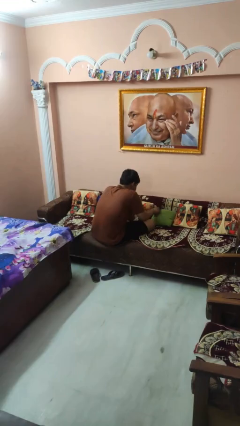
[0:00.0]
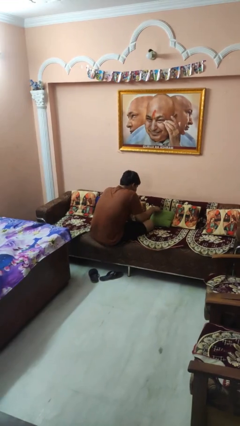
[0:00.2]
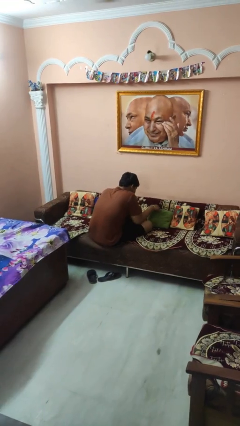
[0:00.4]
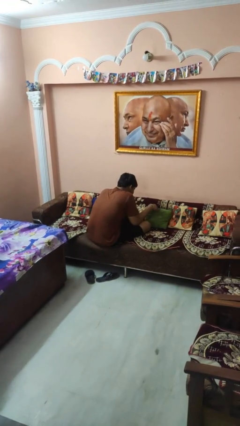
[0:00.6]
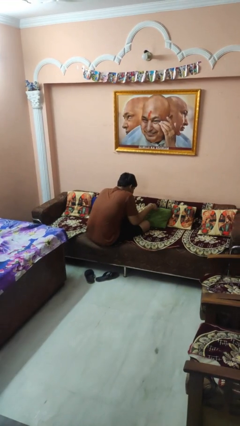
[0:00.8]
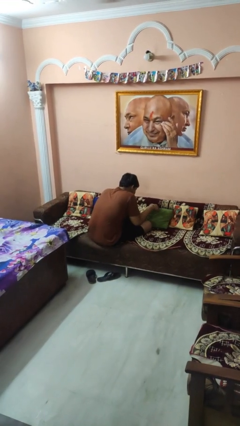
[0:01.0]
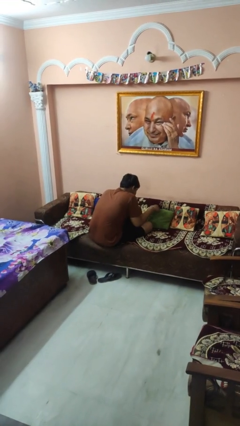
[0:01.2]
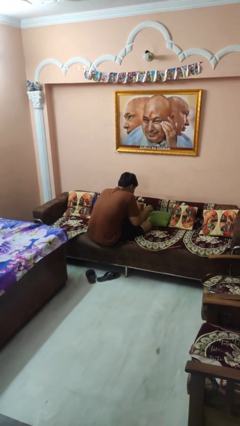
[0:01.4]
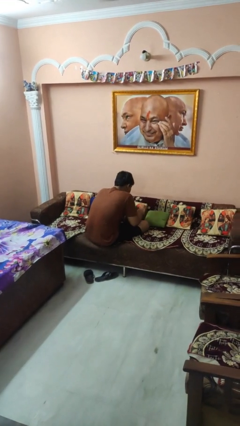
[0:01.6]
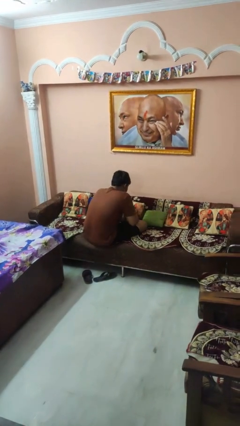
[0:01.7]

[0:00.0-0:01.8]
person searches in couch

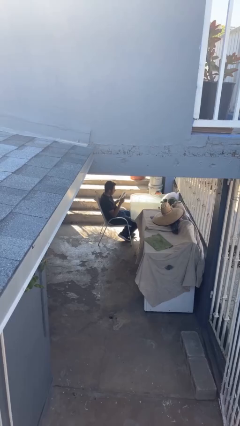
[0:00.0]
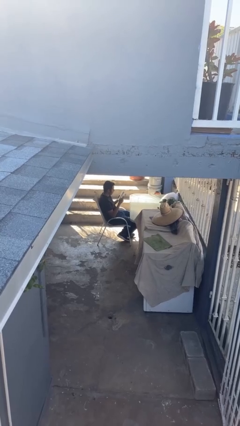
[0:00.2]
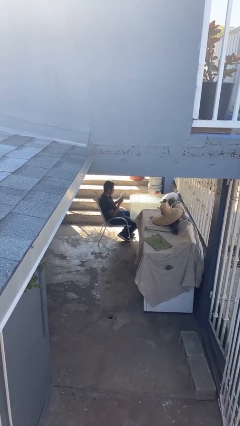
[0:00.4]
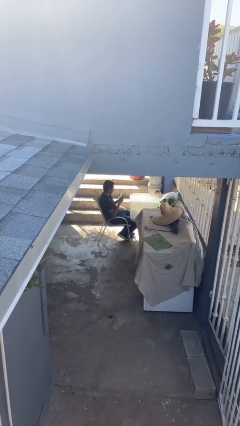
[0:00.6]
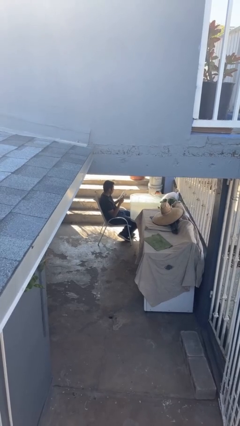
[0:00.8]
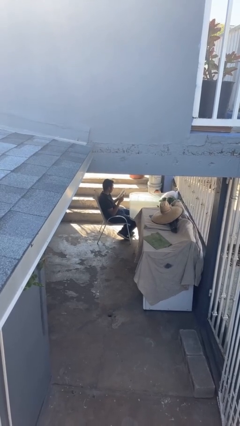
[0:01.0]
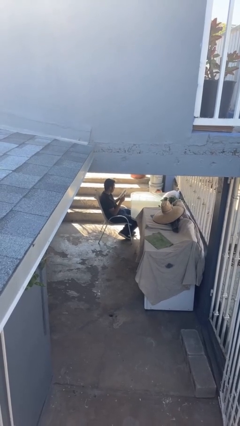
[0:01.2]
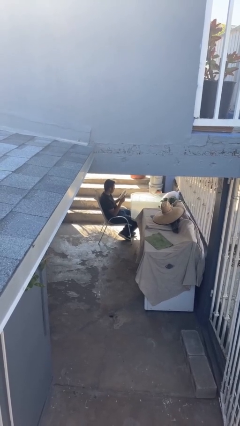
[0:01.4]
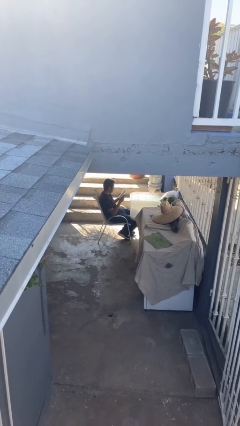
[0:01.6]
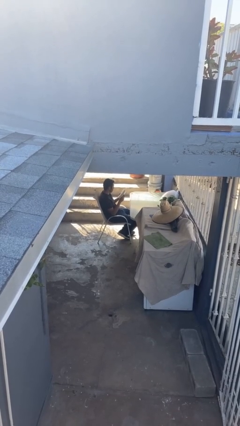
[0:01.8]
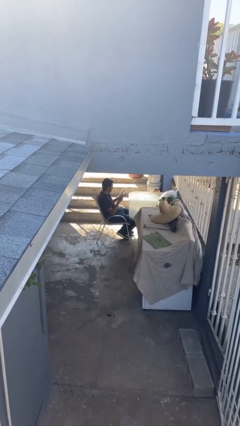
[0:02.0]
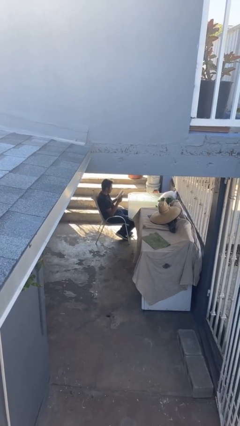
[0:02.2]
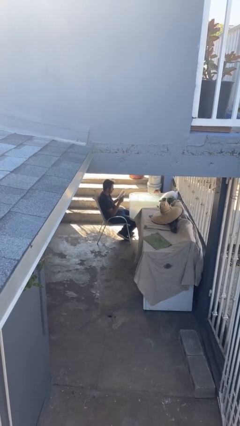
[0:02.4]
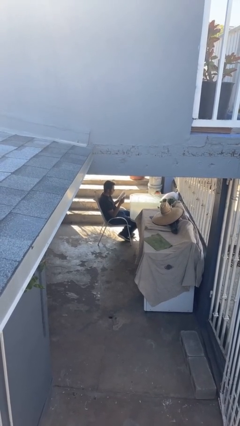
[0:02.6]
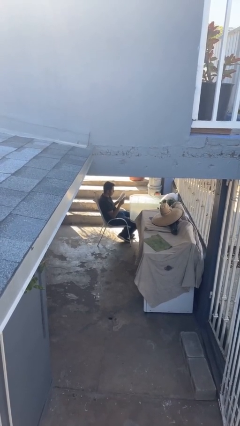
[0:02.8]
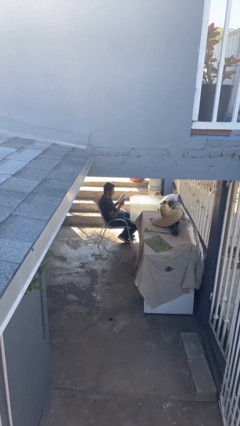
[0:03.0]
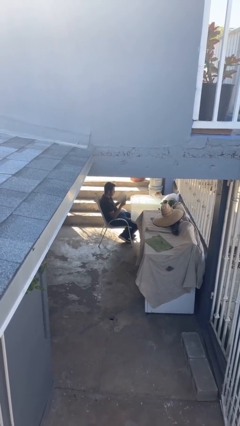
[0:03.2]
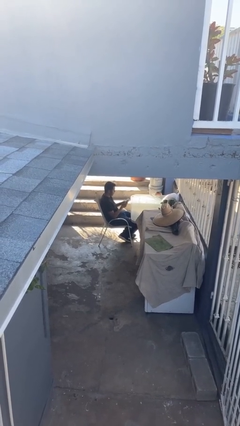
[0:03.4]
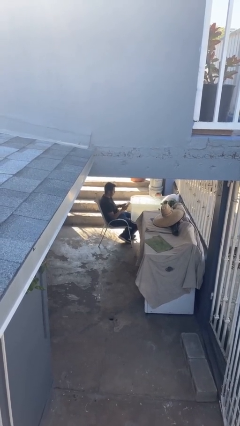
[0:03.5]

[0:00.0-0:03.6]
person reads document

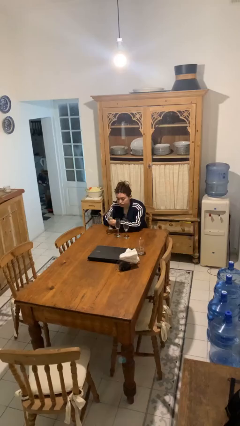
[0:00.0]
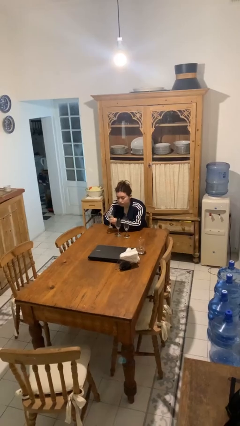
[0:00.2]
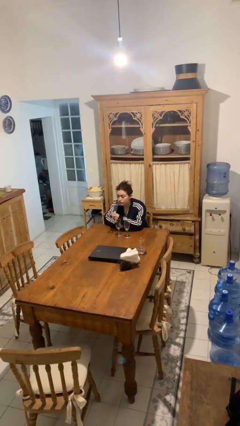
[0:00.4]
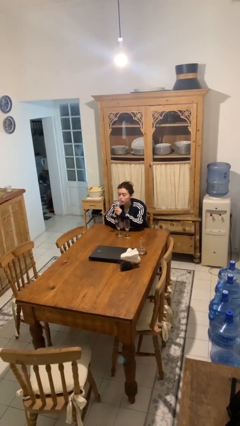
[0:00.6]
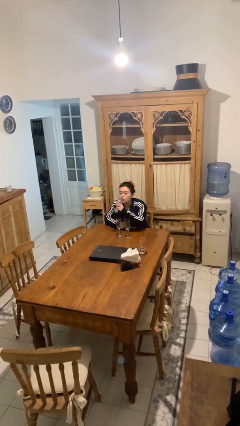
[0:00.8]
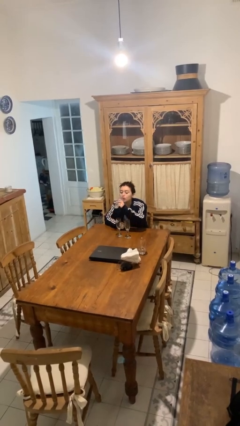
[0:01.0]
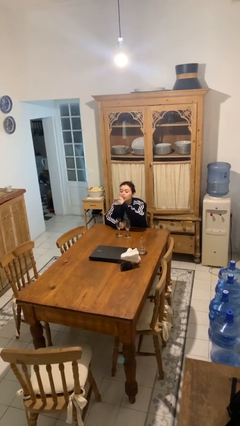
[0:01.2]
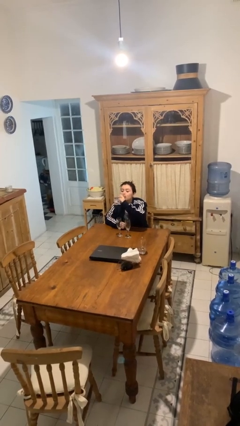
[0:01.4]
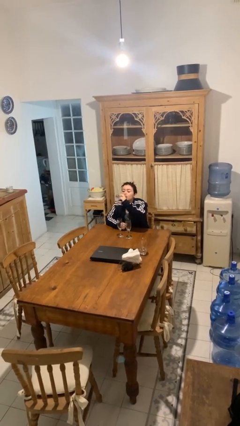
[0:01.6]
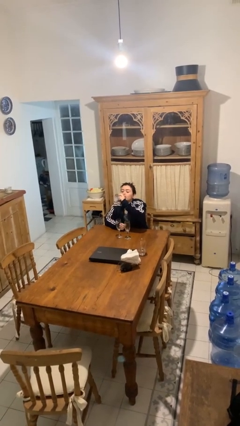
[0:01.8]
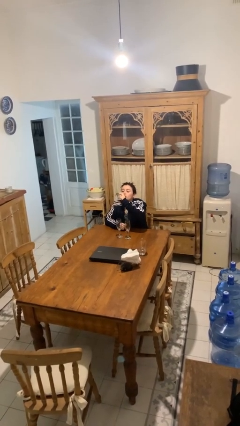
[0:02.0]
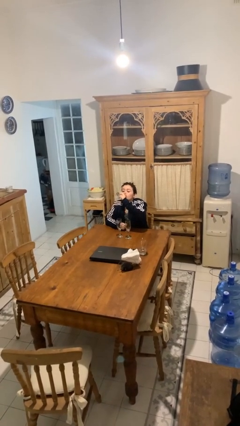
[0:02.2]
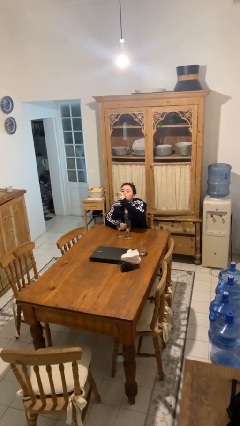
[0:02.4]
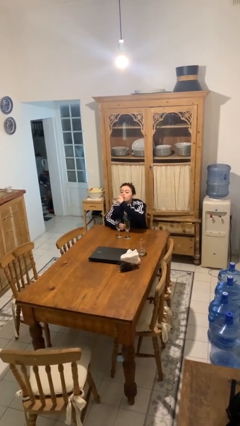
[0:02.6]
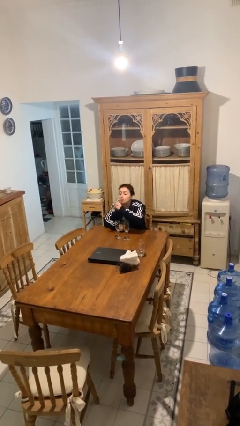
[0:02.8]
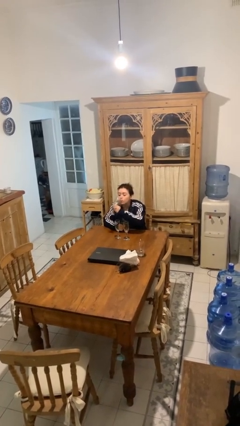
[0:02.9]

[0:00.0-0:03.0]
person drinks from shotglass

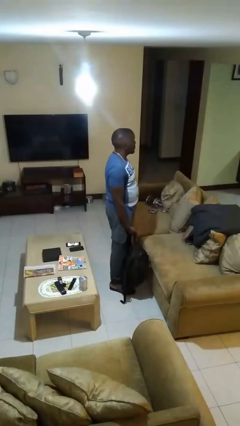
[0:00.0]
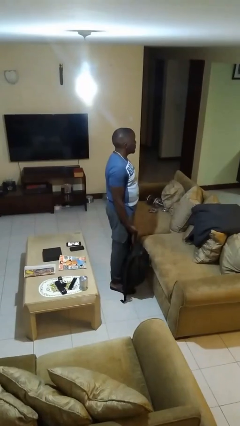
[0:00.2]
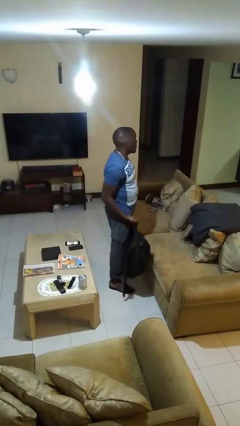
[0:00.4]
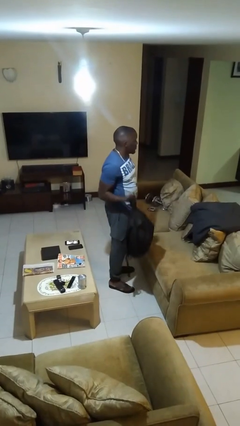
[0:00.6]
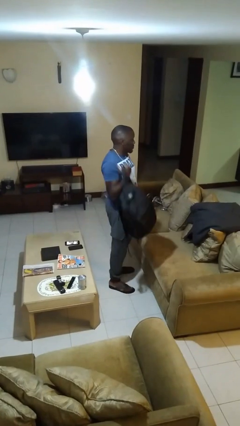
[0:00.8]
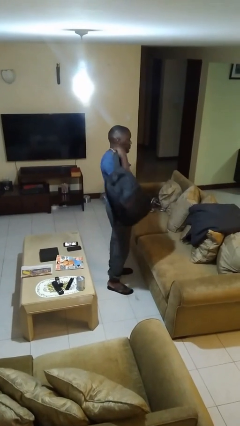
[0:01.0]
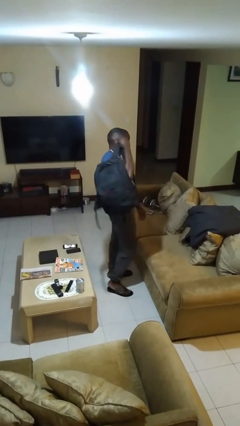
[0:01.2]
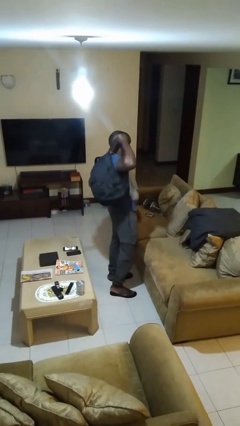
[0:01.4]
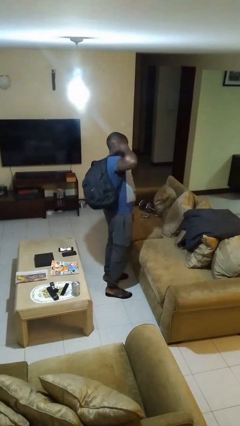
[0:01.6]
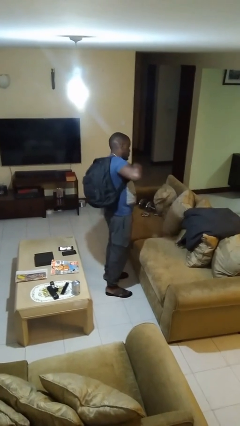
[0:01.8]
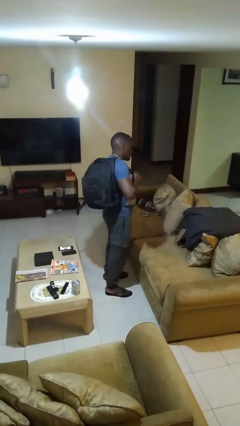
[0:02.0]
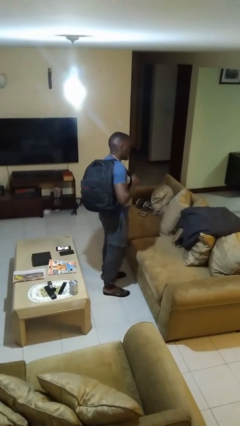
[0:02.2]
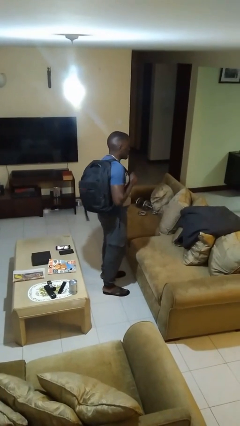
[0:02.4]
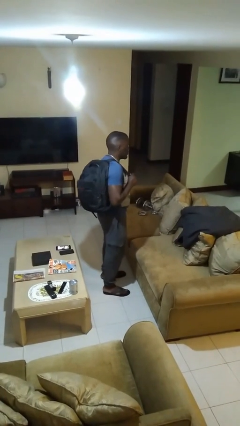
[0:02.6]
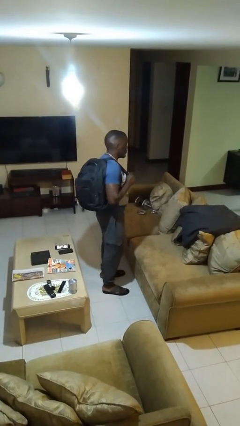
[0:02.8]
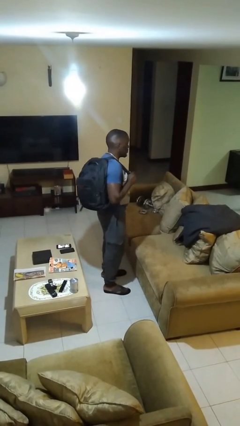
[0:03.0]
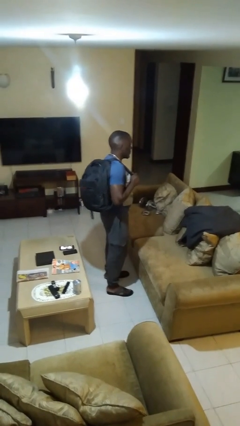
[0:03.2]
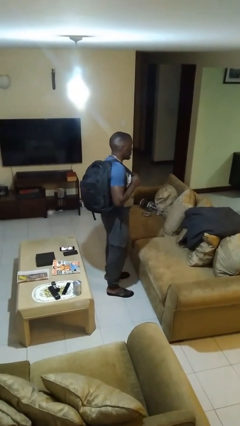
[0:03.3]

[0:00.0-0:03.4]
person puts on backpack

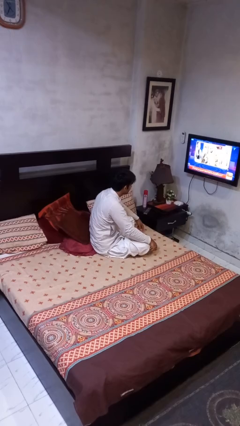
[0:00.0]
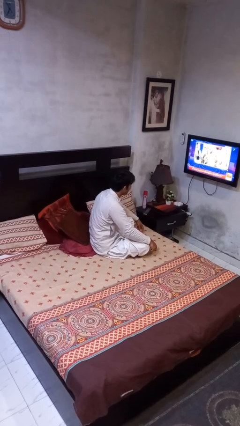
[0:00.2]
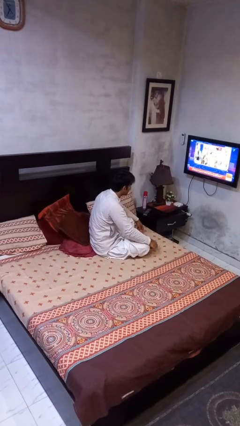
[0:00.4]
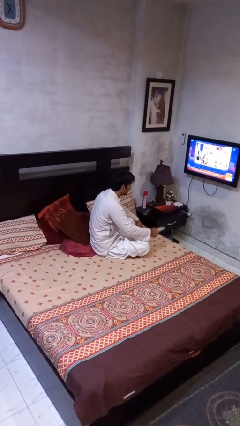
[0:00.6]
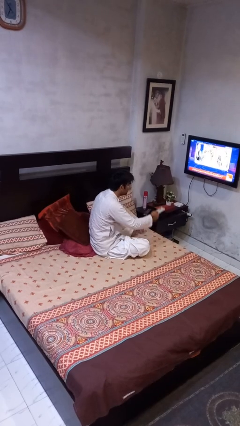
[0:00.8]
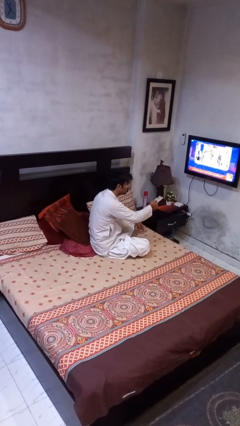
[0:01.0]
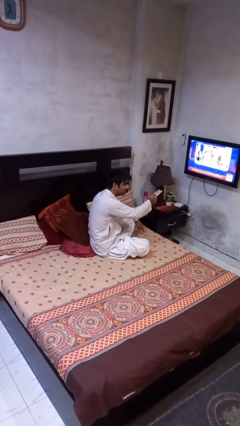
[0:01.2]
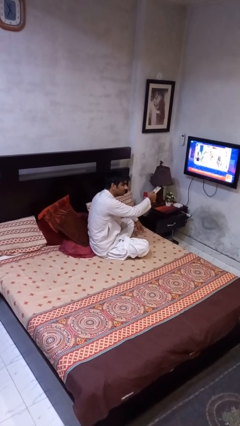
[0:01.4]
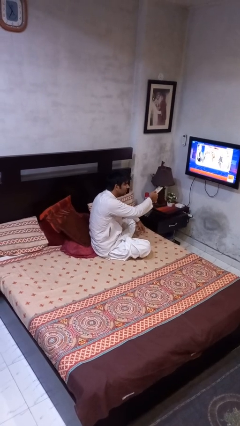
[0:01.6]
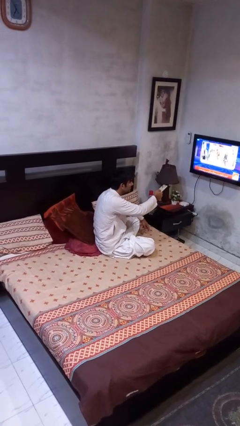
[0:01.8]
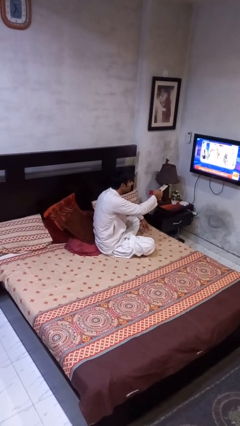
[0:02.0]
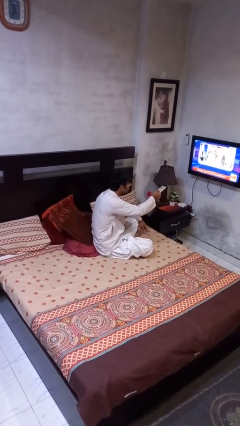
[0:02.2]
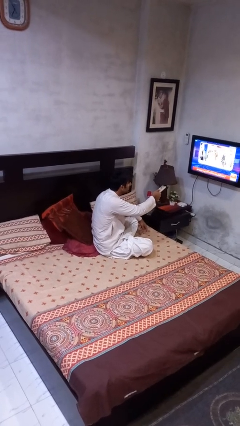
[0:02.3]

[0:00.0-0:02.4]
person uses television remote

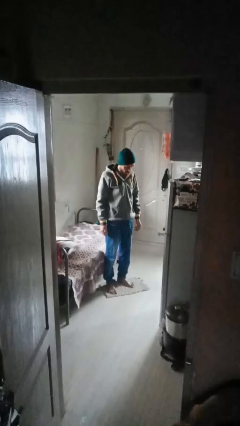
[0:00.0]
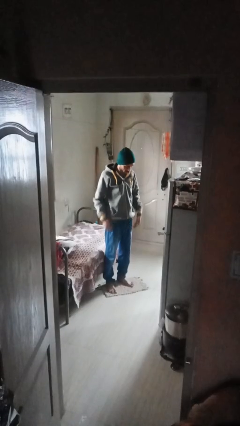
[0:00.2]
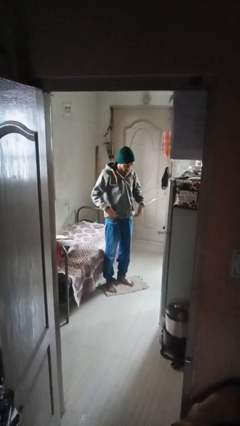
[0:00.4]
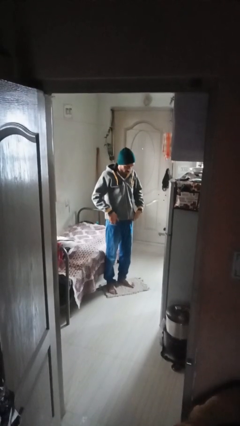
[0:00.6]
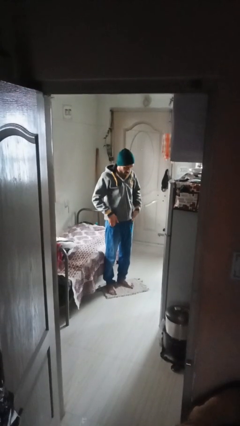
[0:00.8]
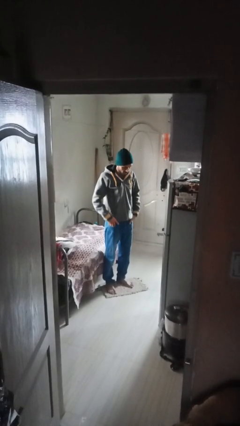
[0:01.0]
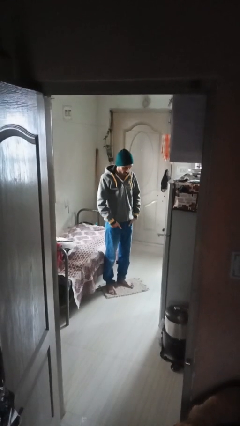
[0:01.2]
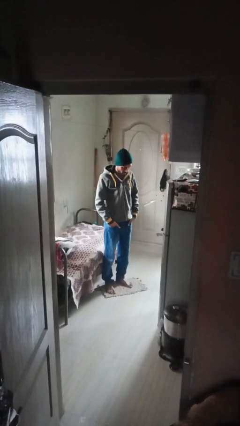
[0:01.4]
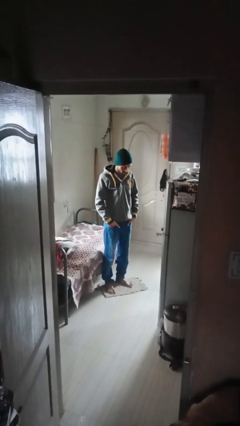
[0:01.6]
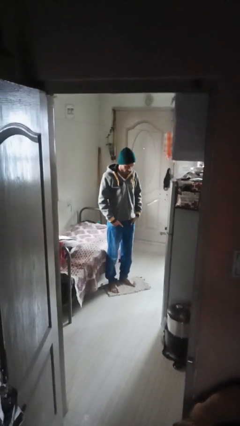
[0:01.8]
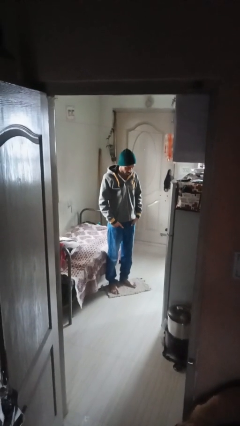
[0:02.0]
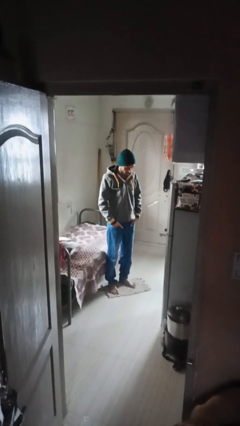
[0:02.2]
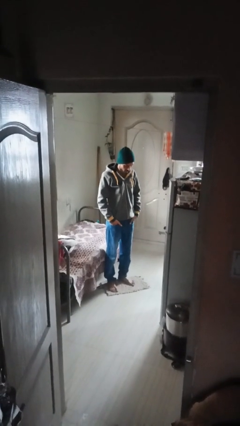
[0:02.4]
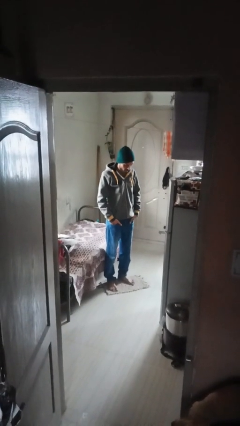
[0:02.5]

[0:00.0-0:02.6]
person puts hands in back pockets

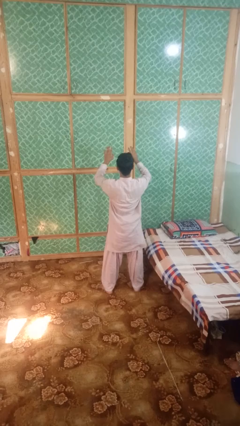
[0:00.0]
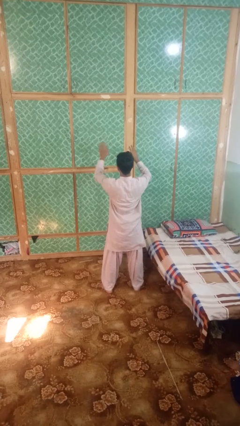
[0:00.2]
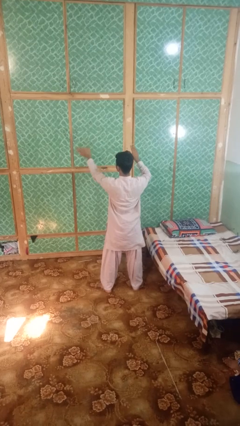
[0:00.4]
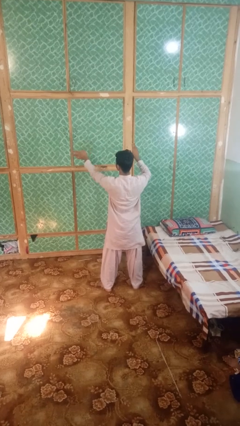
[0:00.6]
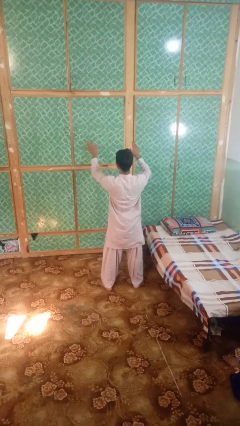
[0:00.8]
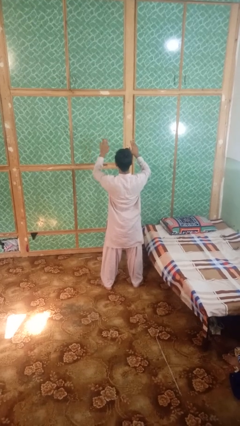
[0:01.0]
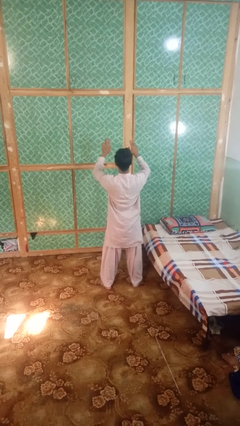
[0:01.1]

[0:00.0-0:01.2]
person gestures swipe left
